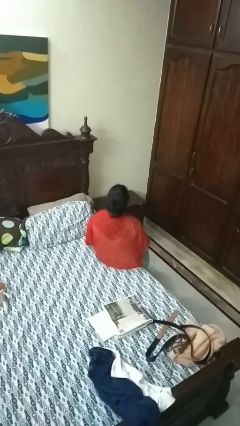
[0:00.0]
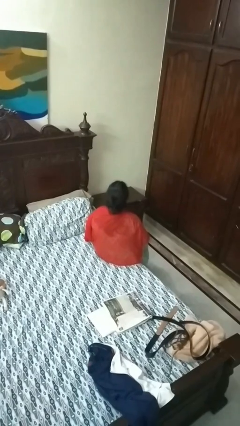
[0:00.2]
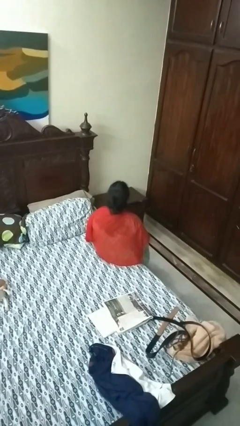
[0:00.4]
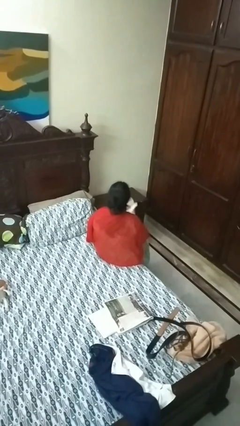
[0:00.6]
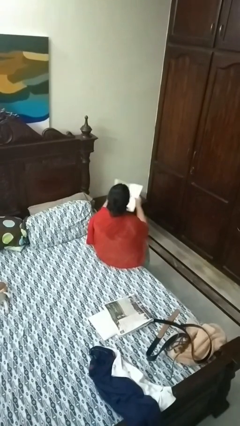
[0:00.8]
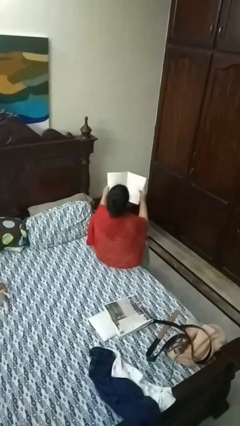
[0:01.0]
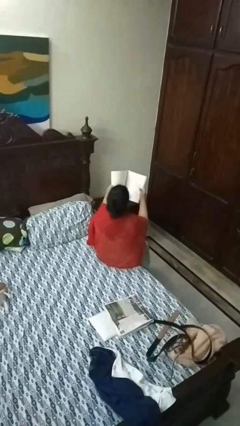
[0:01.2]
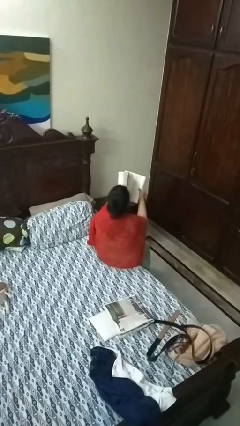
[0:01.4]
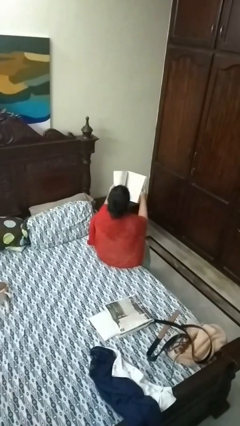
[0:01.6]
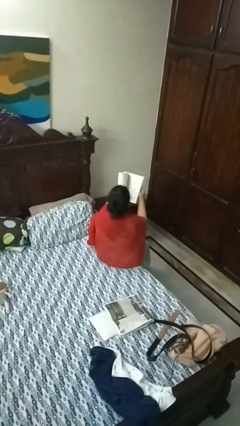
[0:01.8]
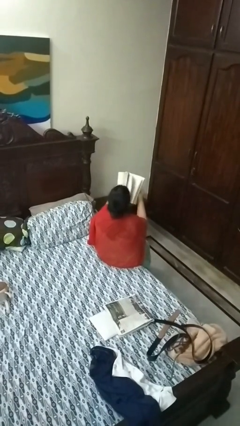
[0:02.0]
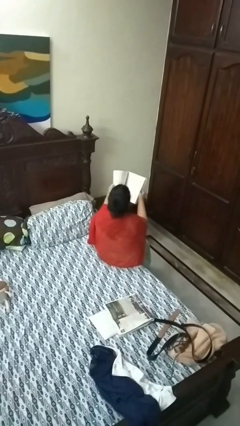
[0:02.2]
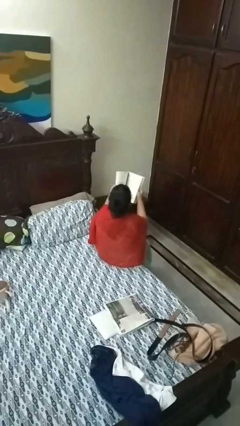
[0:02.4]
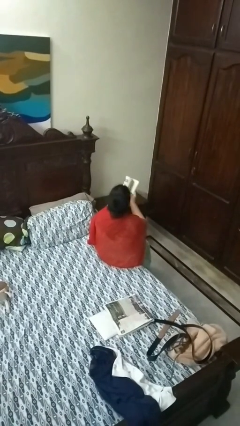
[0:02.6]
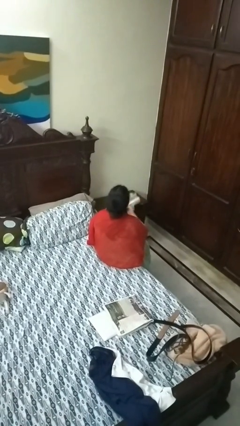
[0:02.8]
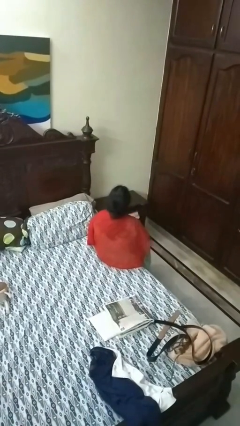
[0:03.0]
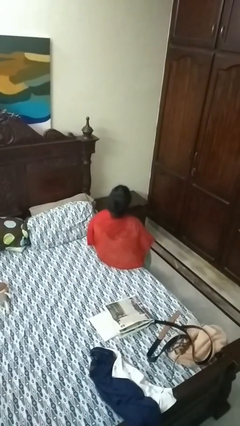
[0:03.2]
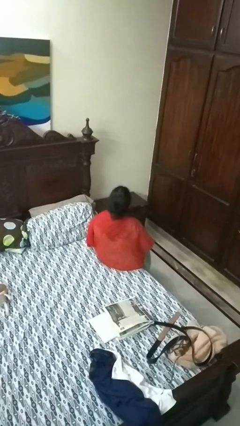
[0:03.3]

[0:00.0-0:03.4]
person reads magazine

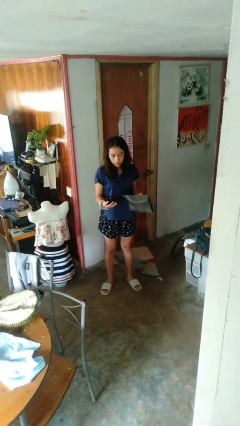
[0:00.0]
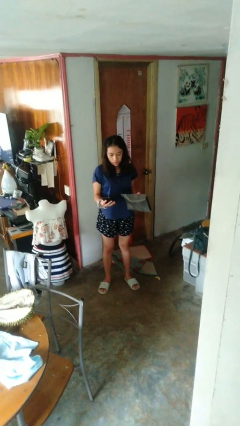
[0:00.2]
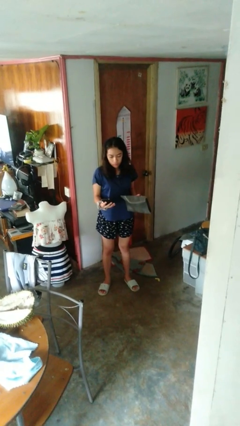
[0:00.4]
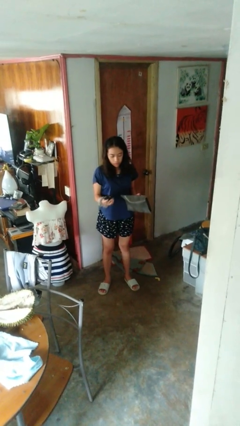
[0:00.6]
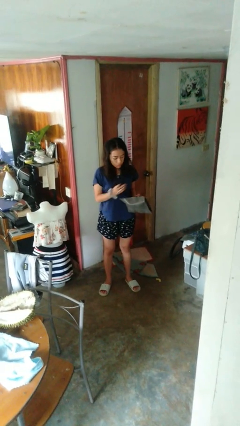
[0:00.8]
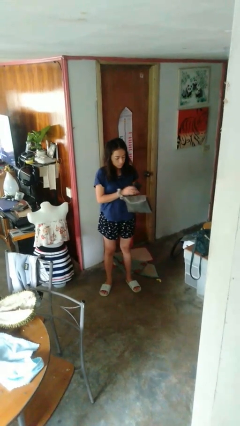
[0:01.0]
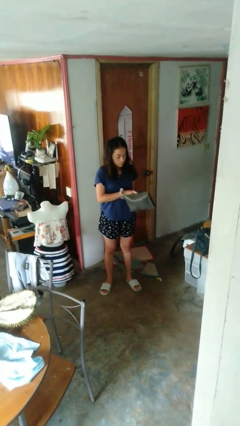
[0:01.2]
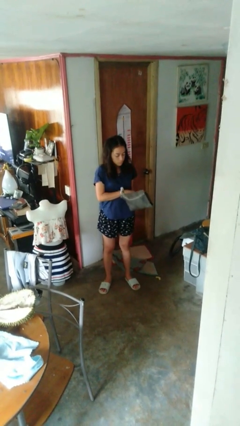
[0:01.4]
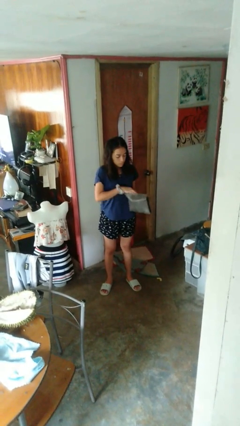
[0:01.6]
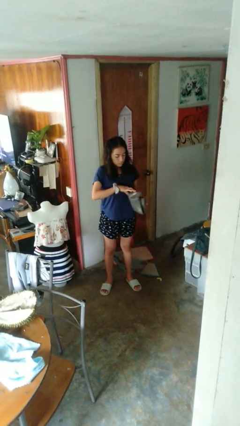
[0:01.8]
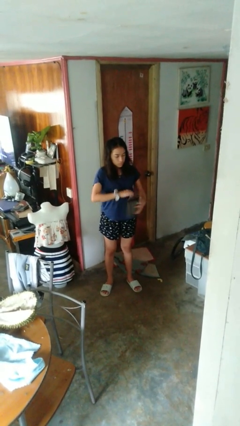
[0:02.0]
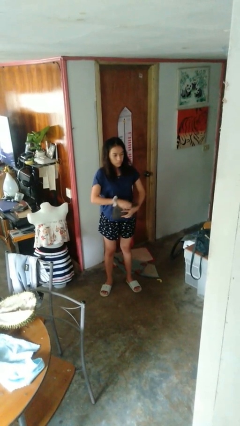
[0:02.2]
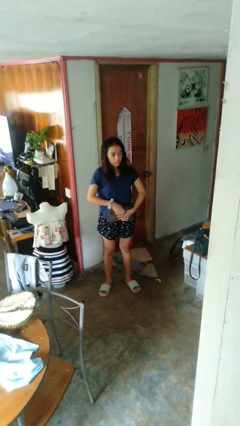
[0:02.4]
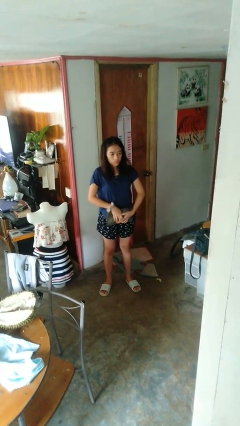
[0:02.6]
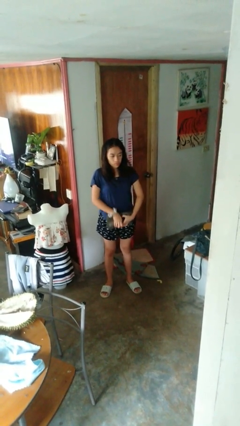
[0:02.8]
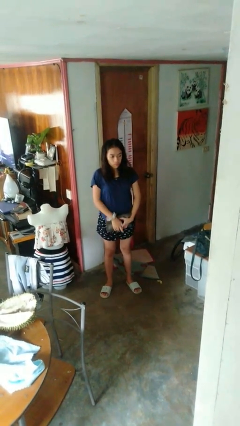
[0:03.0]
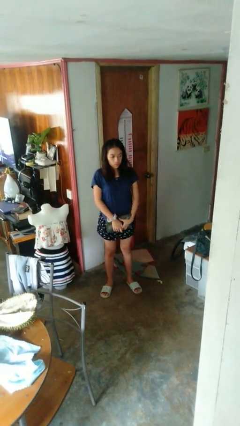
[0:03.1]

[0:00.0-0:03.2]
person puts object into purse

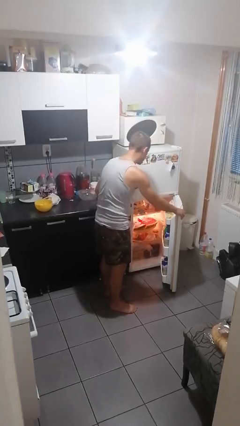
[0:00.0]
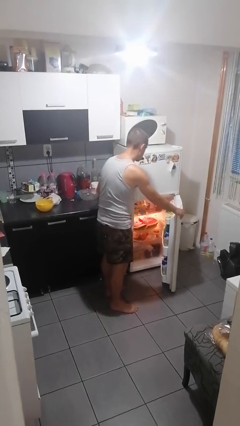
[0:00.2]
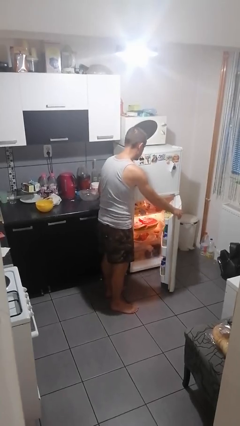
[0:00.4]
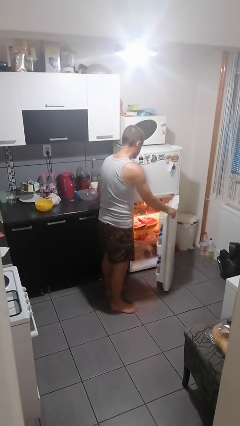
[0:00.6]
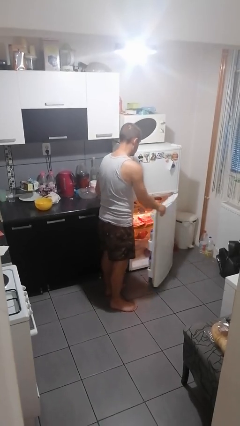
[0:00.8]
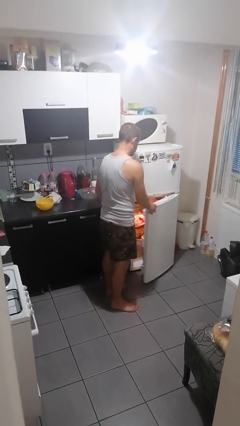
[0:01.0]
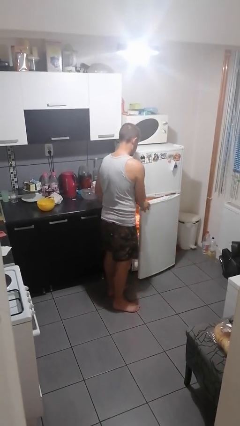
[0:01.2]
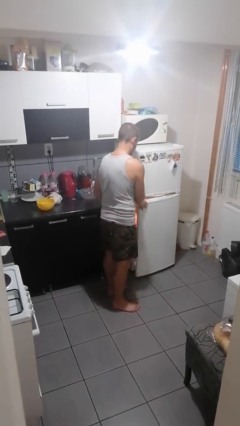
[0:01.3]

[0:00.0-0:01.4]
person closes refrigerator

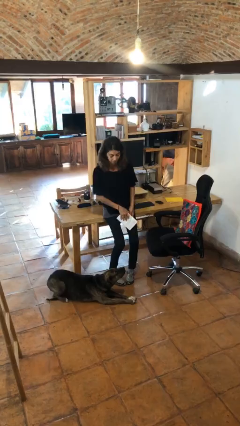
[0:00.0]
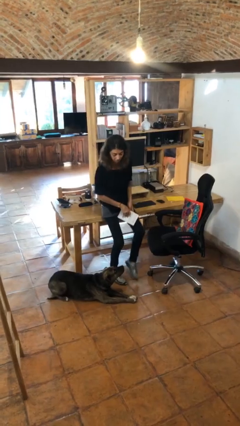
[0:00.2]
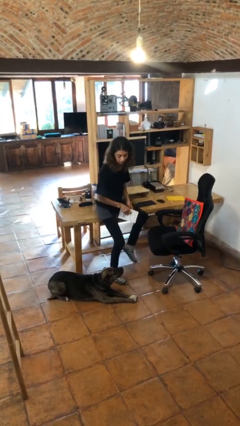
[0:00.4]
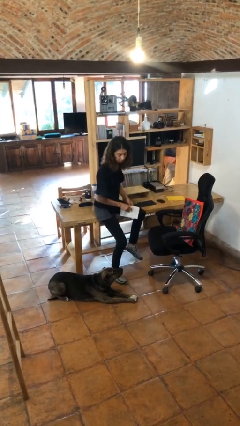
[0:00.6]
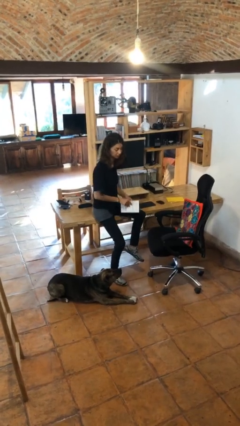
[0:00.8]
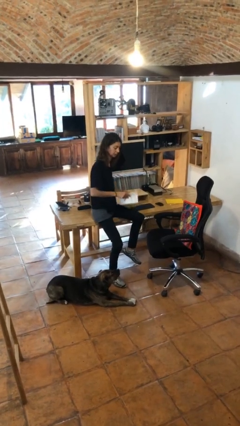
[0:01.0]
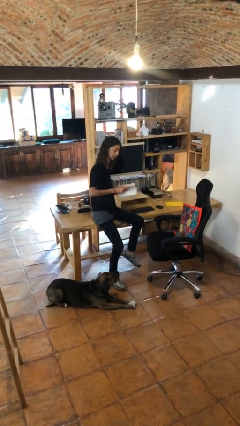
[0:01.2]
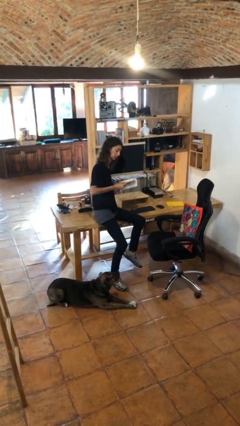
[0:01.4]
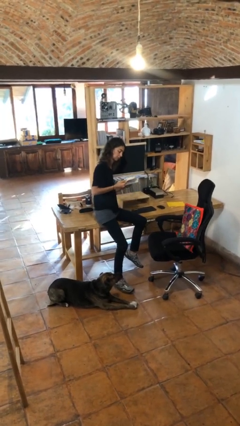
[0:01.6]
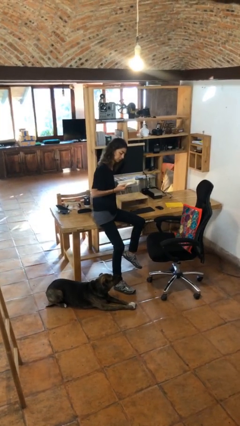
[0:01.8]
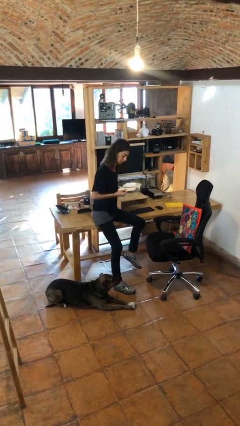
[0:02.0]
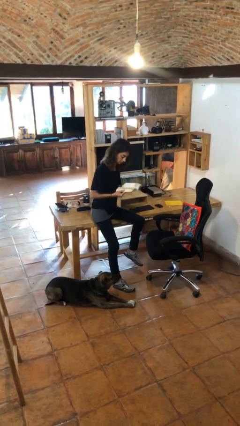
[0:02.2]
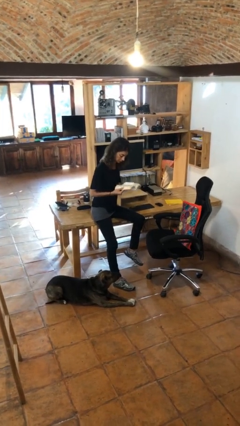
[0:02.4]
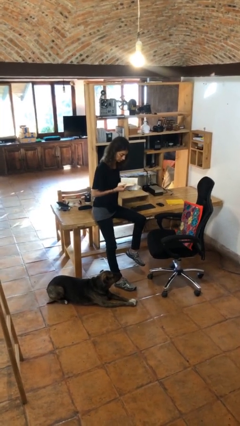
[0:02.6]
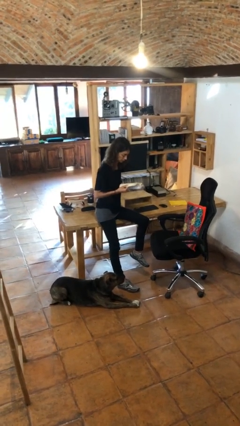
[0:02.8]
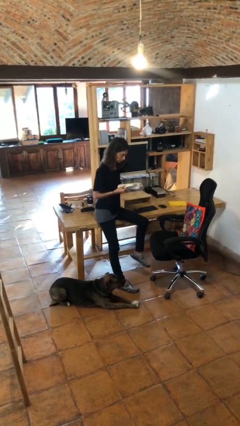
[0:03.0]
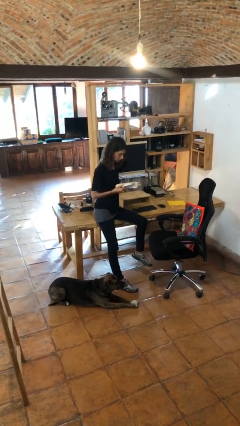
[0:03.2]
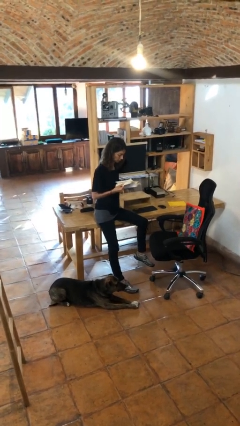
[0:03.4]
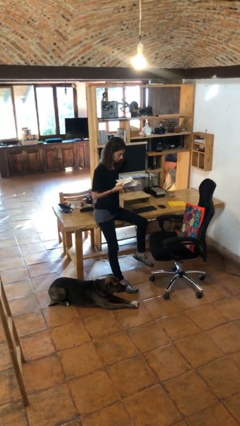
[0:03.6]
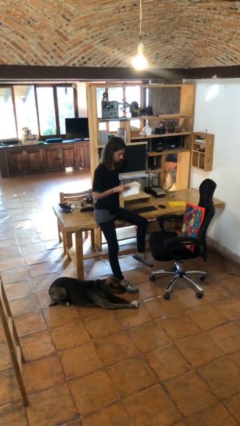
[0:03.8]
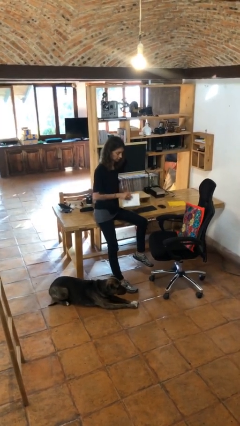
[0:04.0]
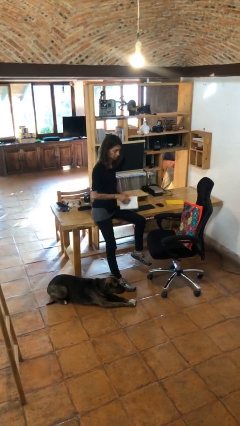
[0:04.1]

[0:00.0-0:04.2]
person reads book

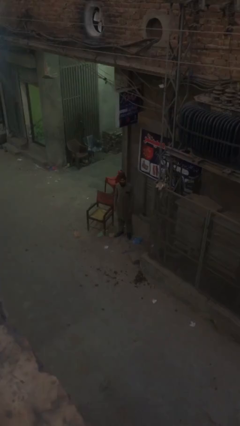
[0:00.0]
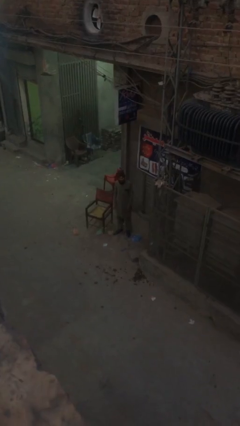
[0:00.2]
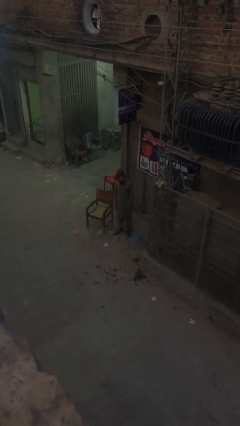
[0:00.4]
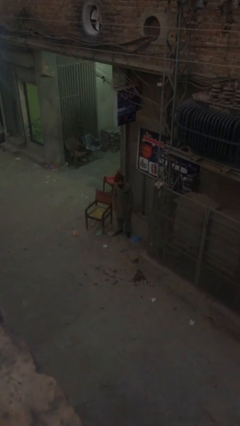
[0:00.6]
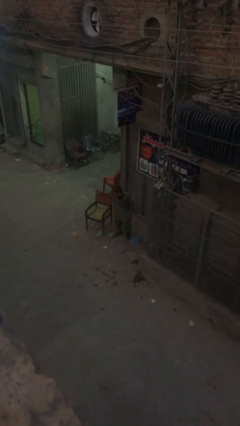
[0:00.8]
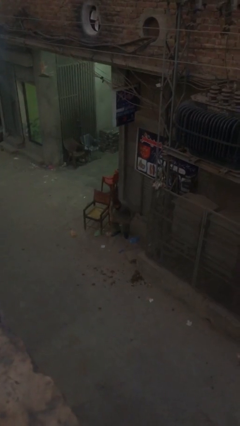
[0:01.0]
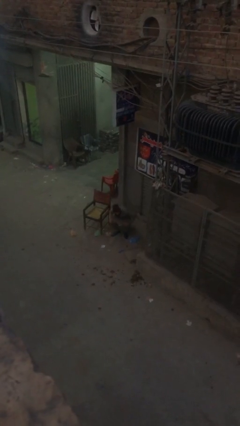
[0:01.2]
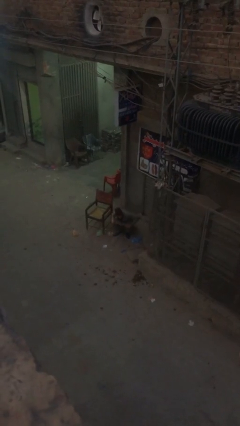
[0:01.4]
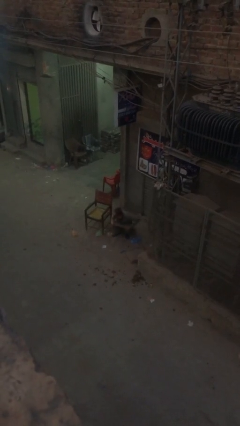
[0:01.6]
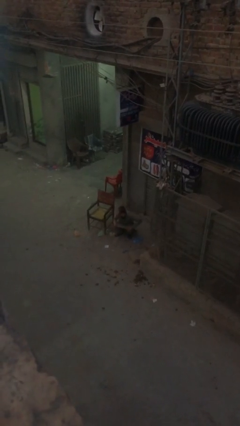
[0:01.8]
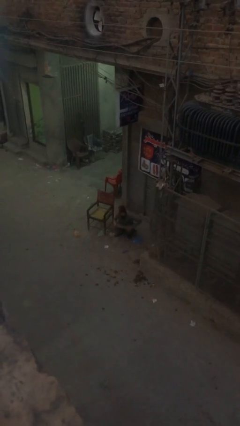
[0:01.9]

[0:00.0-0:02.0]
person sits down

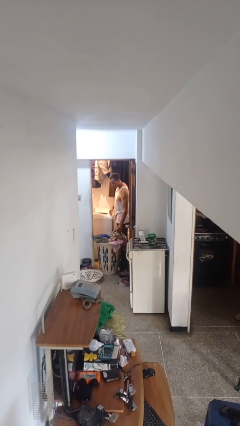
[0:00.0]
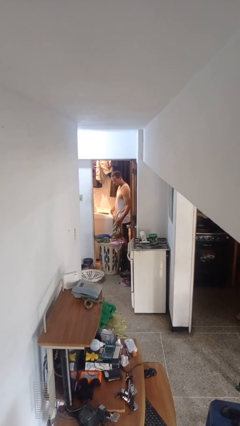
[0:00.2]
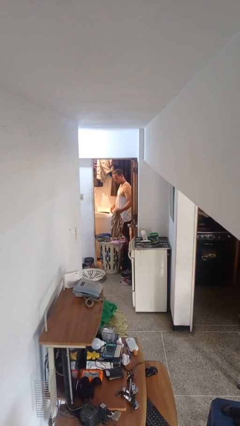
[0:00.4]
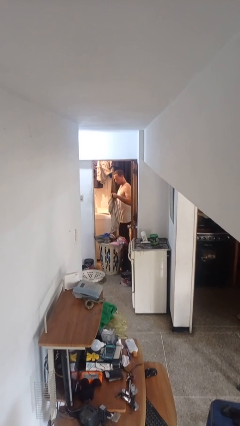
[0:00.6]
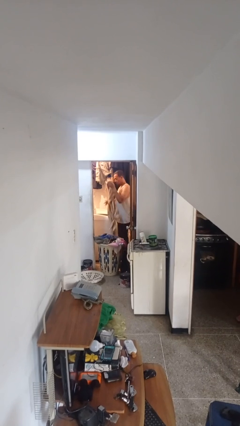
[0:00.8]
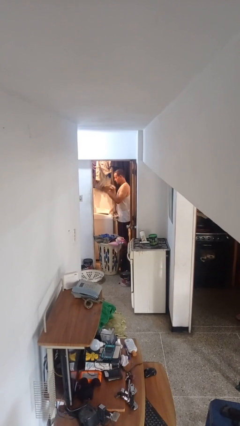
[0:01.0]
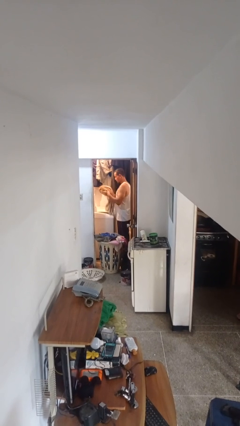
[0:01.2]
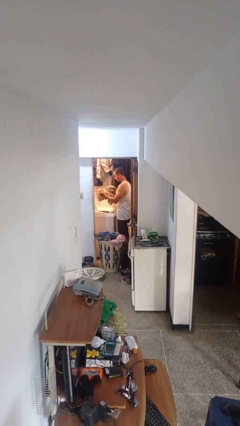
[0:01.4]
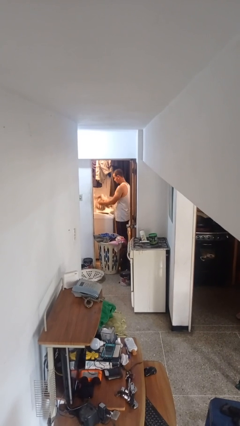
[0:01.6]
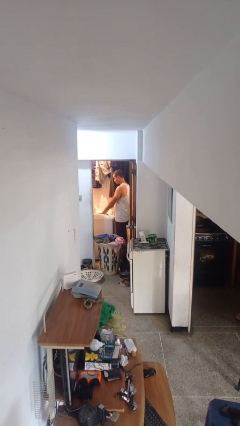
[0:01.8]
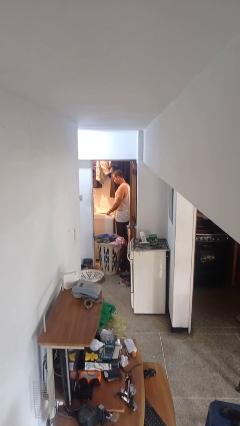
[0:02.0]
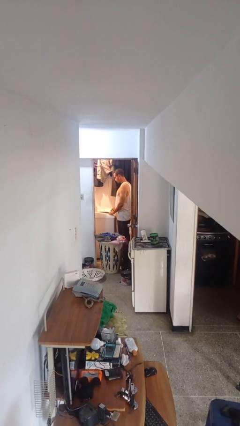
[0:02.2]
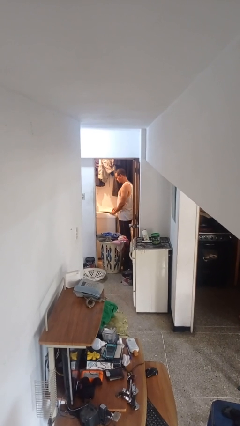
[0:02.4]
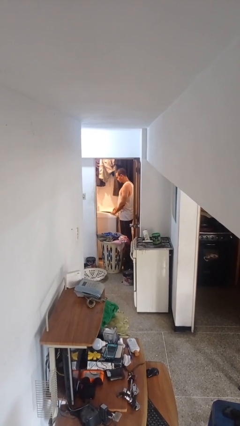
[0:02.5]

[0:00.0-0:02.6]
person loads clotheswasher
